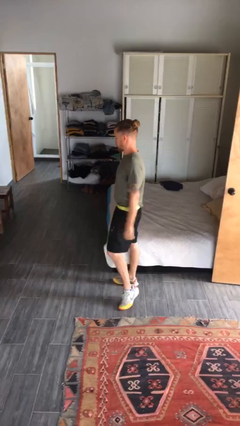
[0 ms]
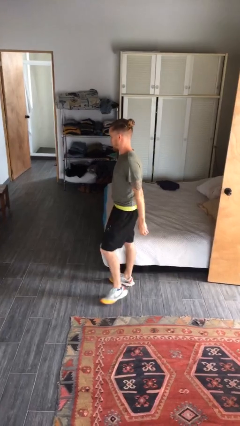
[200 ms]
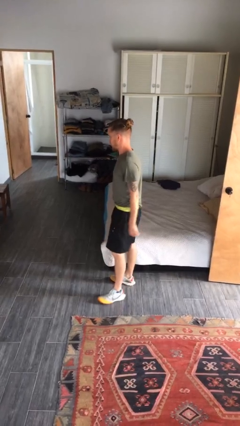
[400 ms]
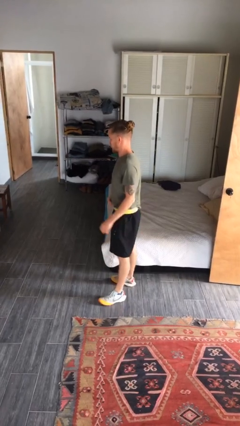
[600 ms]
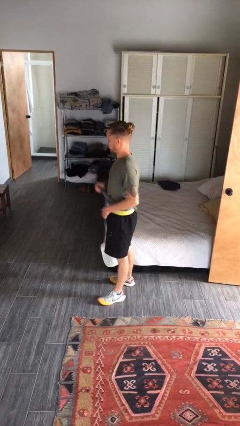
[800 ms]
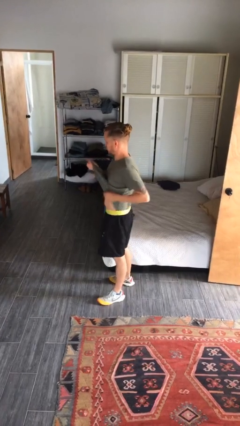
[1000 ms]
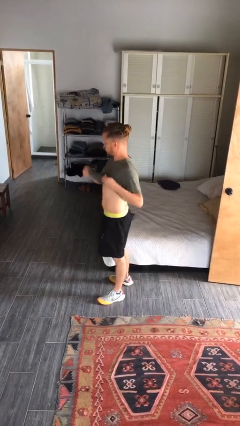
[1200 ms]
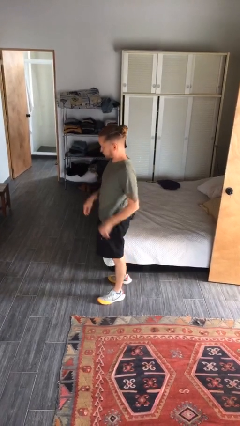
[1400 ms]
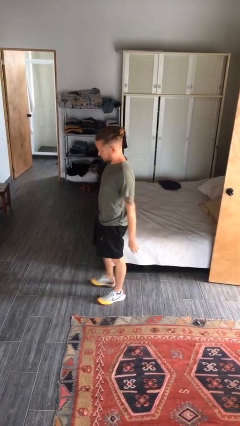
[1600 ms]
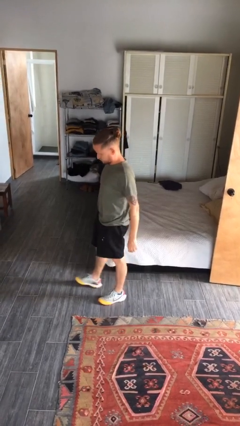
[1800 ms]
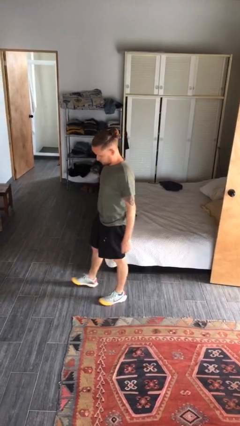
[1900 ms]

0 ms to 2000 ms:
person untucks shirt

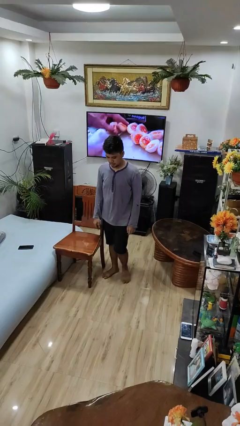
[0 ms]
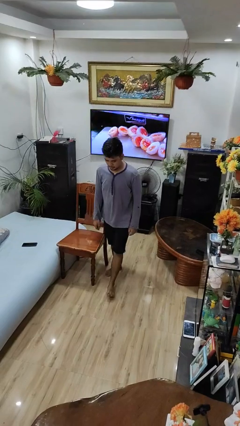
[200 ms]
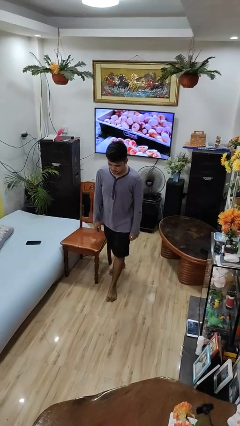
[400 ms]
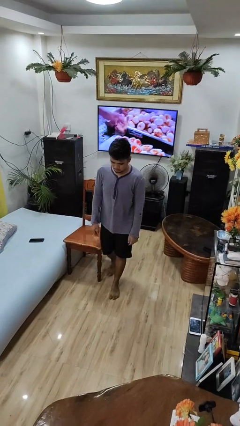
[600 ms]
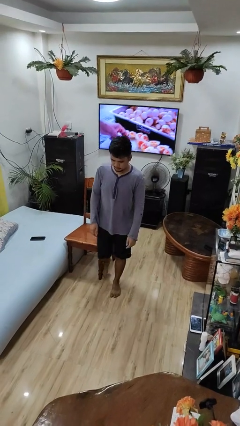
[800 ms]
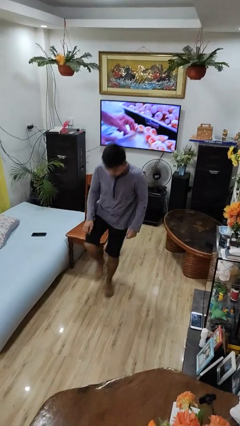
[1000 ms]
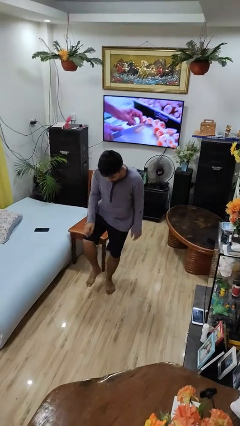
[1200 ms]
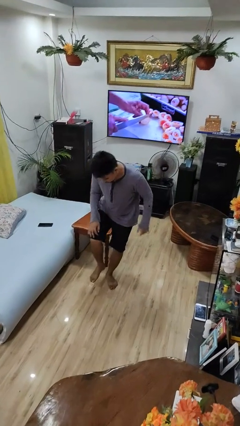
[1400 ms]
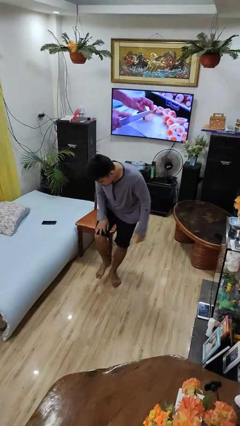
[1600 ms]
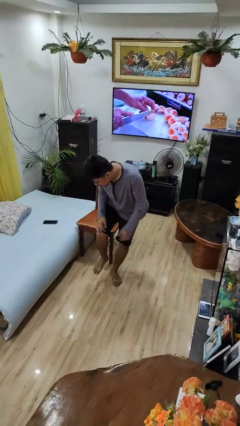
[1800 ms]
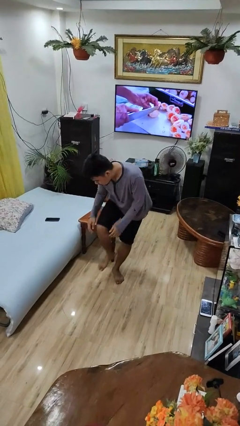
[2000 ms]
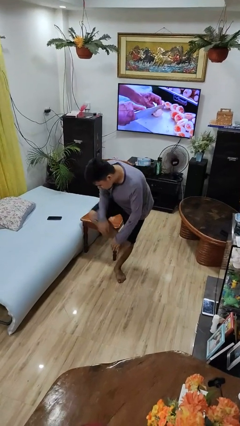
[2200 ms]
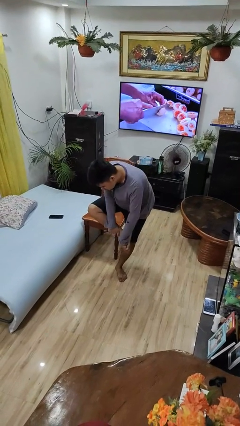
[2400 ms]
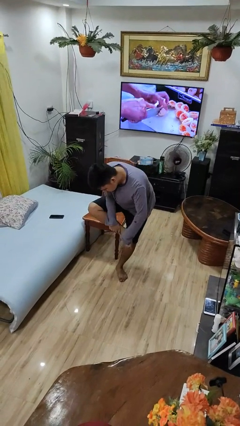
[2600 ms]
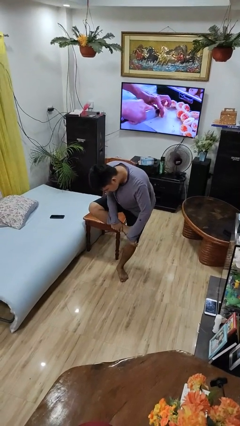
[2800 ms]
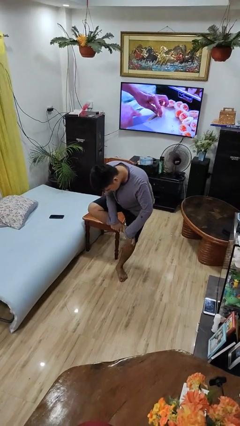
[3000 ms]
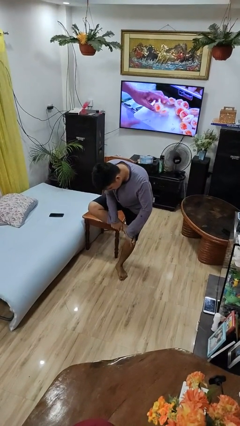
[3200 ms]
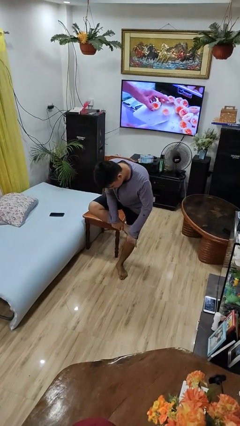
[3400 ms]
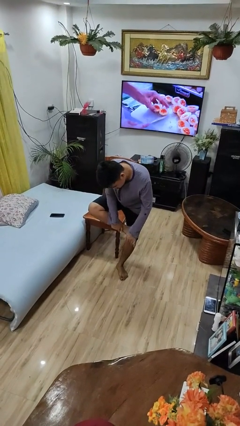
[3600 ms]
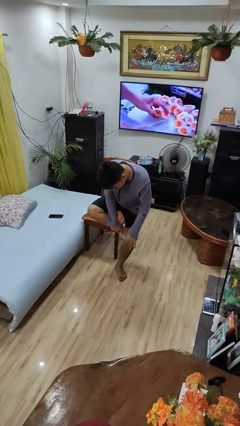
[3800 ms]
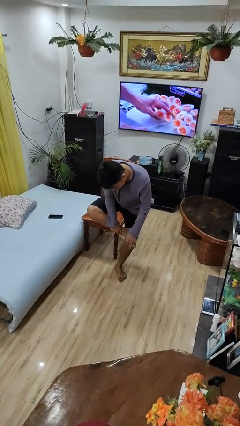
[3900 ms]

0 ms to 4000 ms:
person stubs toe

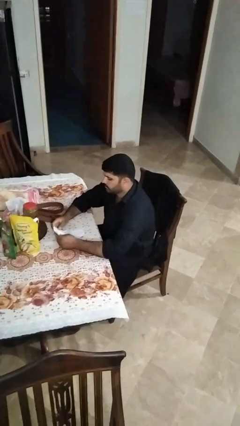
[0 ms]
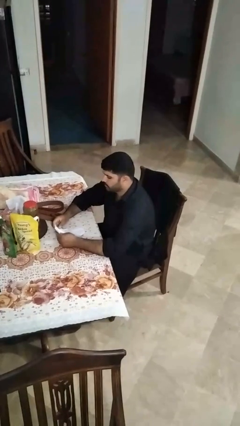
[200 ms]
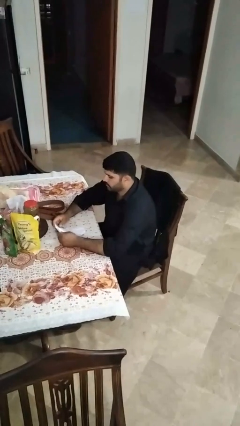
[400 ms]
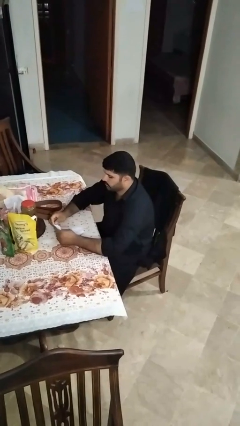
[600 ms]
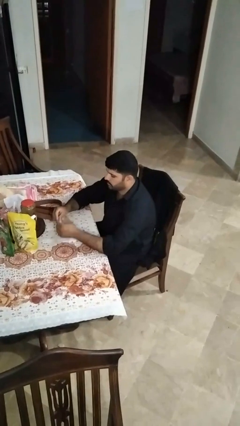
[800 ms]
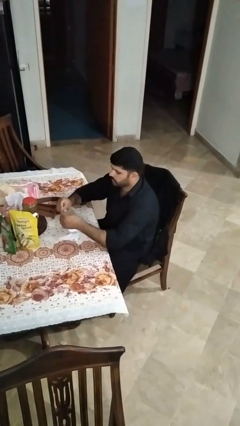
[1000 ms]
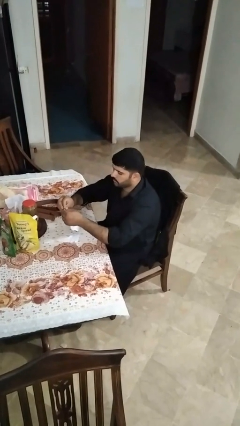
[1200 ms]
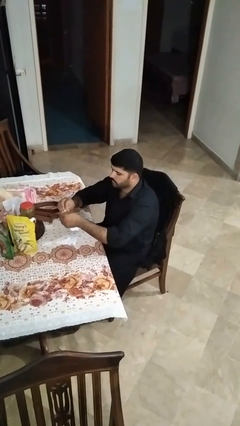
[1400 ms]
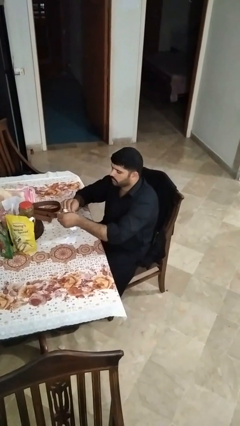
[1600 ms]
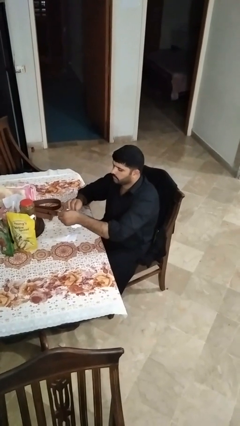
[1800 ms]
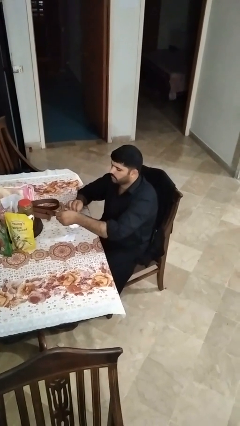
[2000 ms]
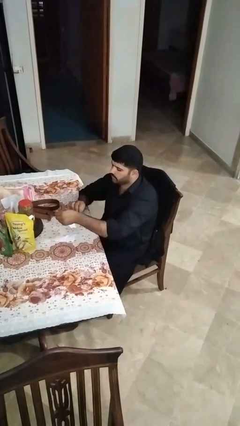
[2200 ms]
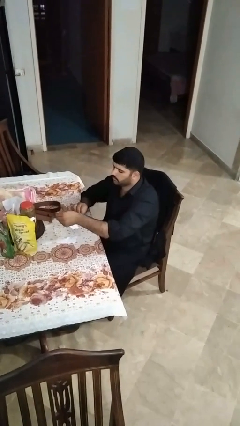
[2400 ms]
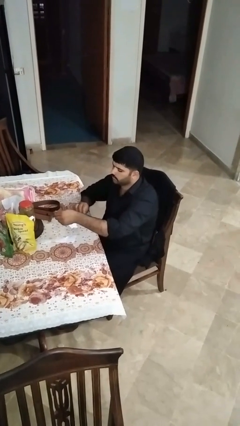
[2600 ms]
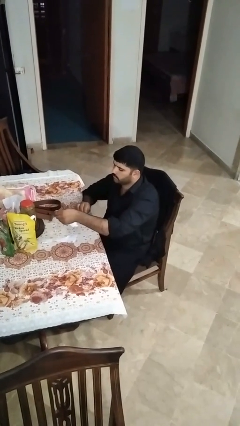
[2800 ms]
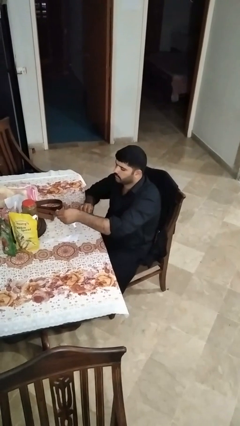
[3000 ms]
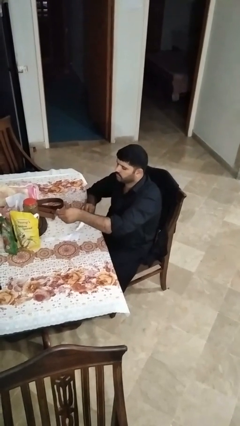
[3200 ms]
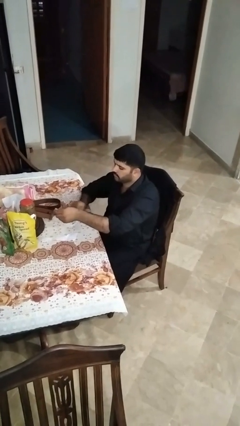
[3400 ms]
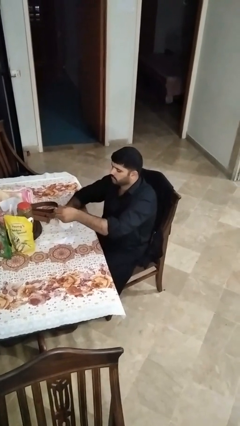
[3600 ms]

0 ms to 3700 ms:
person tears paper

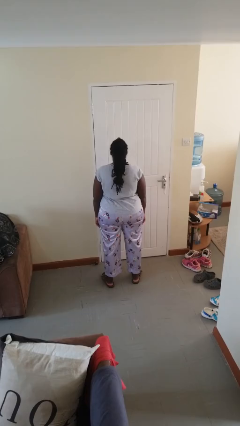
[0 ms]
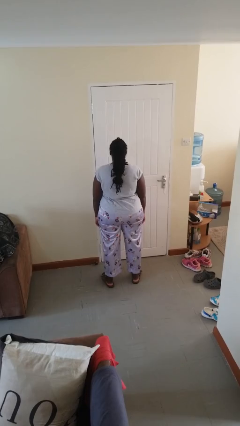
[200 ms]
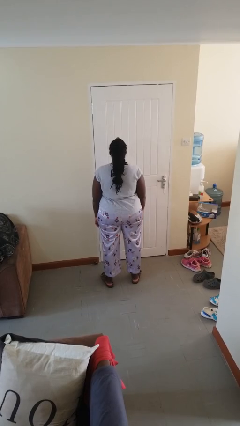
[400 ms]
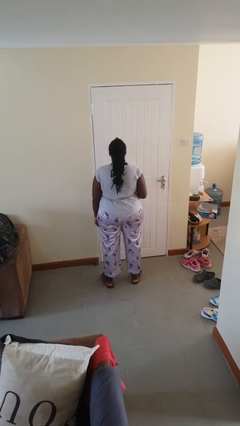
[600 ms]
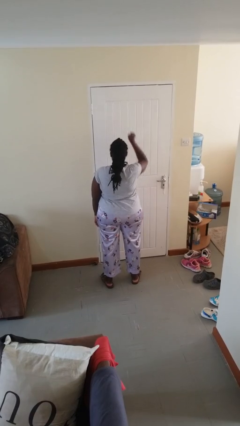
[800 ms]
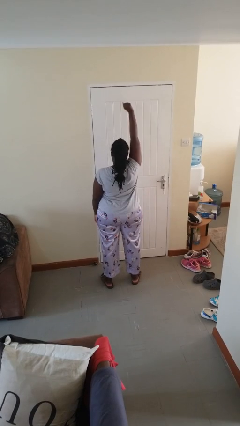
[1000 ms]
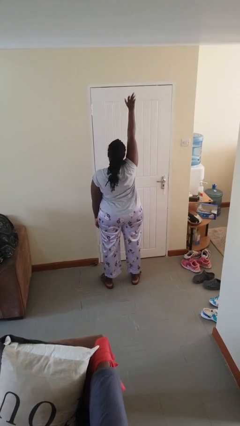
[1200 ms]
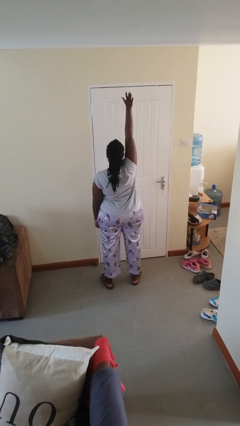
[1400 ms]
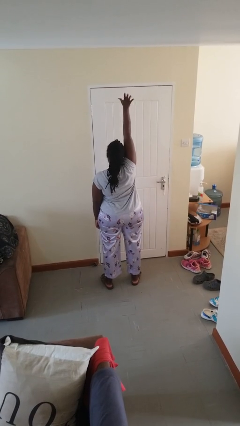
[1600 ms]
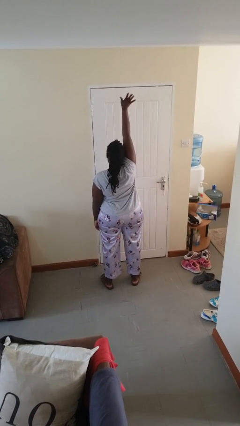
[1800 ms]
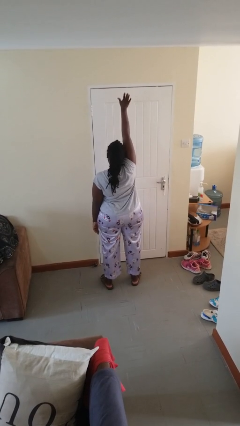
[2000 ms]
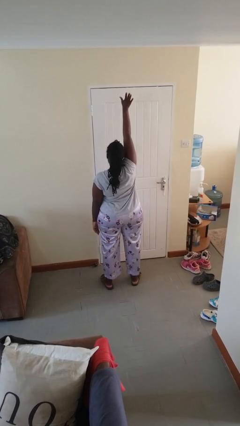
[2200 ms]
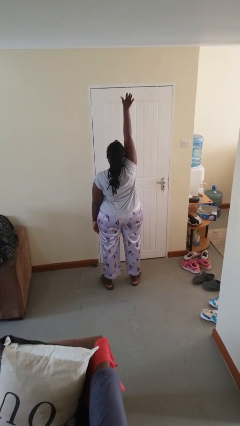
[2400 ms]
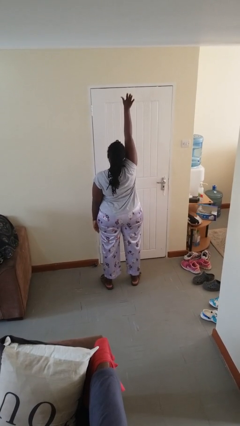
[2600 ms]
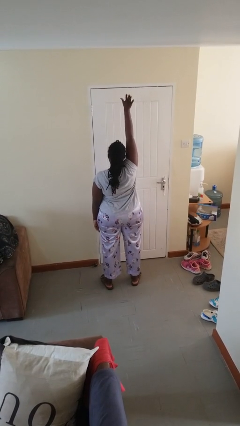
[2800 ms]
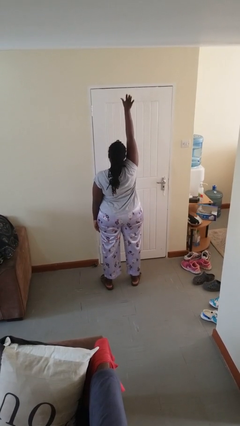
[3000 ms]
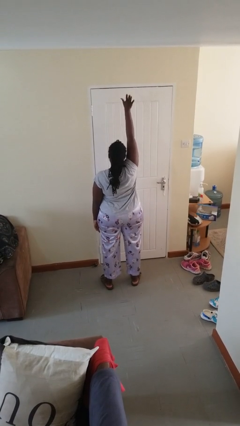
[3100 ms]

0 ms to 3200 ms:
person gestures raise hand

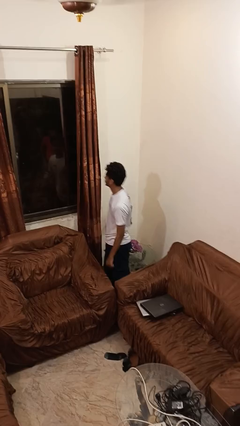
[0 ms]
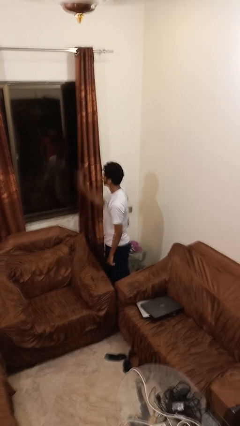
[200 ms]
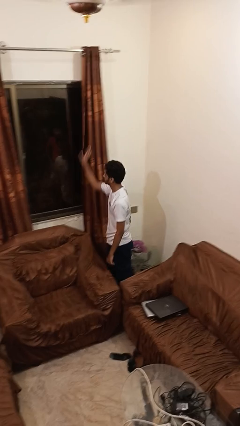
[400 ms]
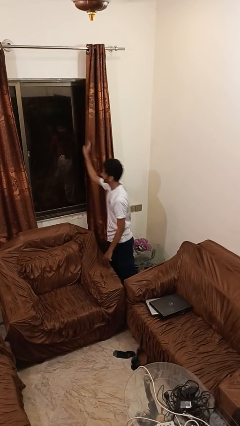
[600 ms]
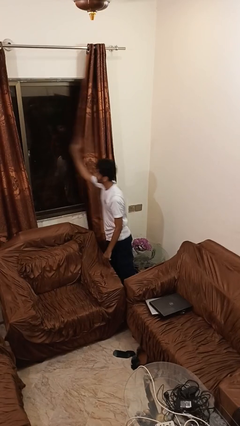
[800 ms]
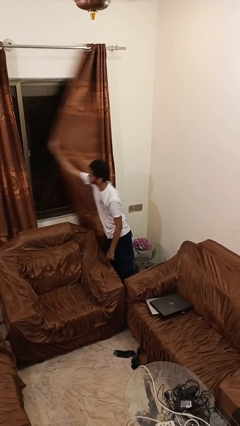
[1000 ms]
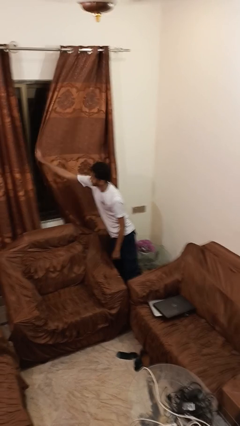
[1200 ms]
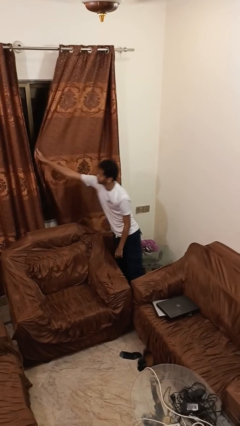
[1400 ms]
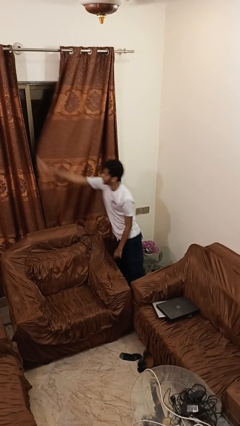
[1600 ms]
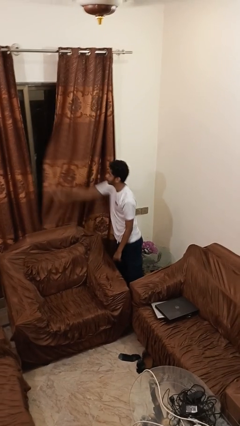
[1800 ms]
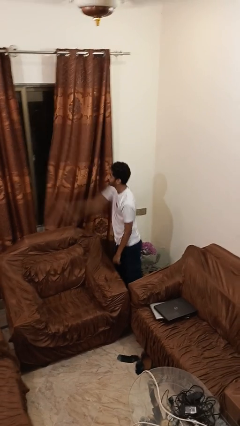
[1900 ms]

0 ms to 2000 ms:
person closes curtains

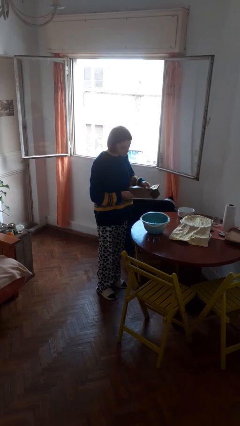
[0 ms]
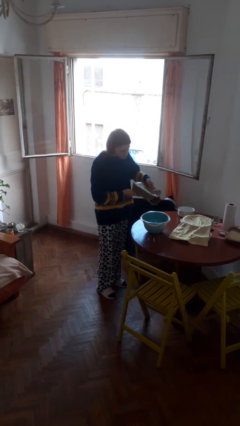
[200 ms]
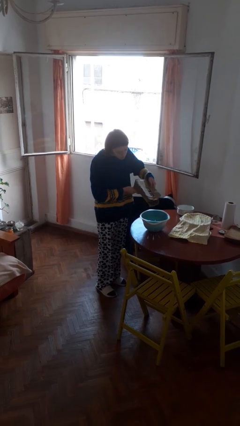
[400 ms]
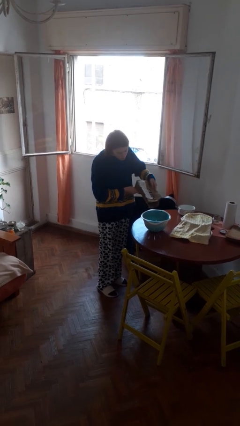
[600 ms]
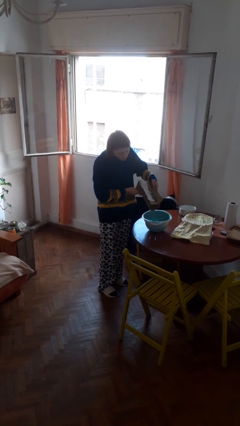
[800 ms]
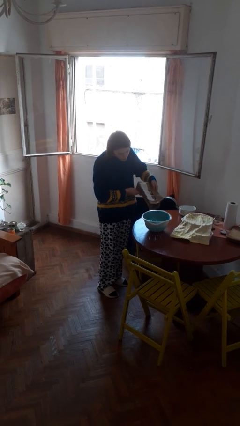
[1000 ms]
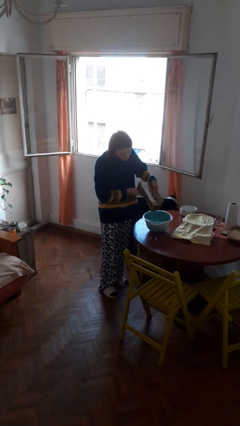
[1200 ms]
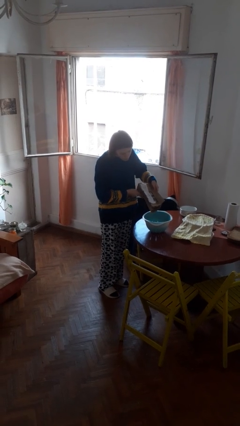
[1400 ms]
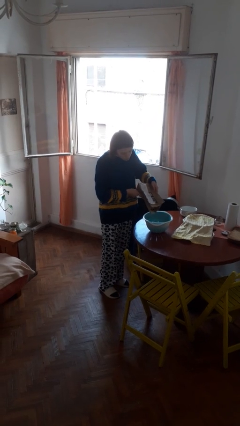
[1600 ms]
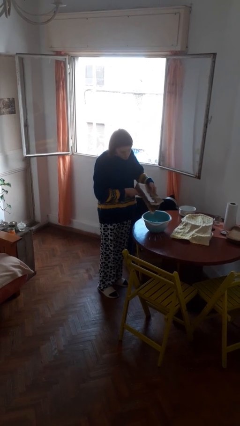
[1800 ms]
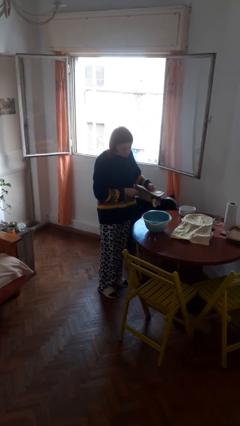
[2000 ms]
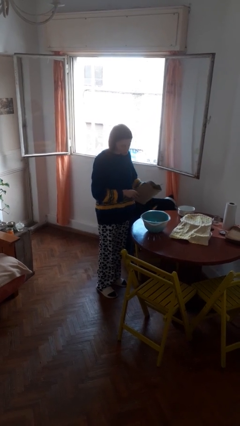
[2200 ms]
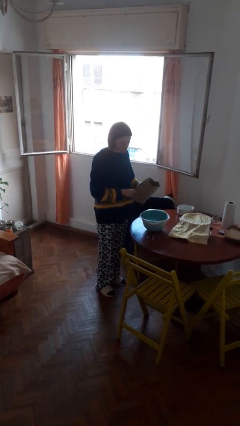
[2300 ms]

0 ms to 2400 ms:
person pours into bowl
